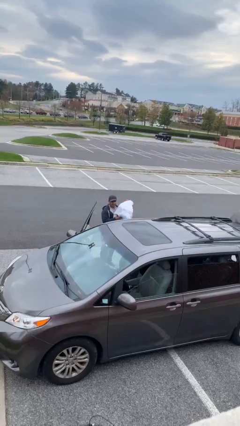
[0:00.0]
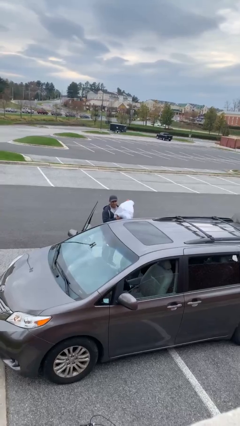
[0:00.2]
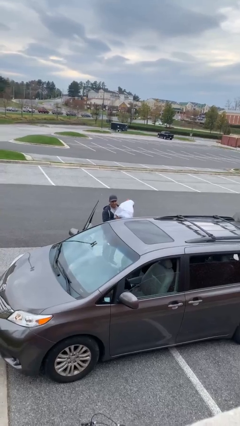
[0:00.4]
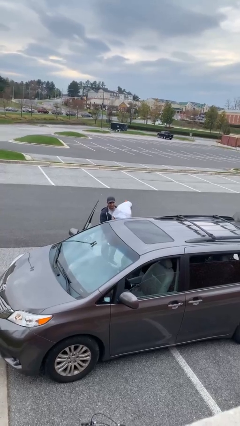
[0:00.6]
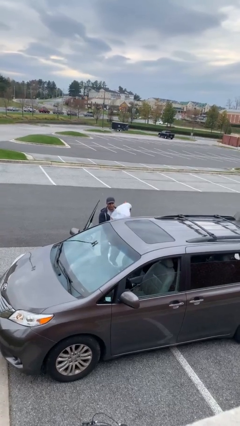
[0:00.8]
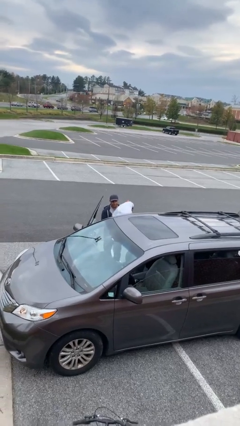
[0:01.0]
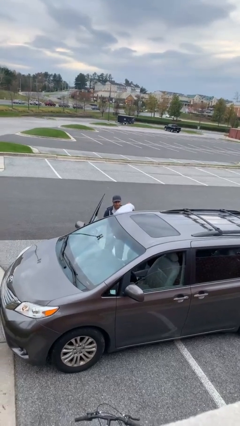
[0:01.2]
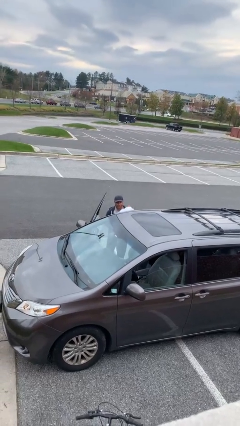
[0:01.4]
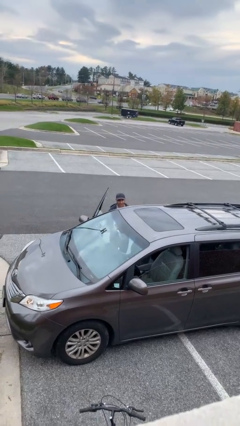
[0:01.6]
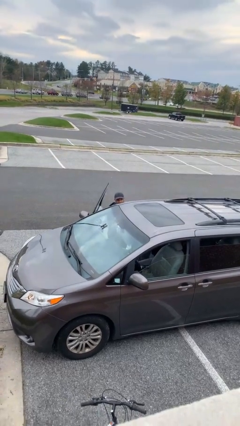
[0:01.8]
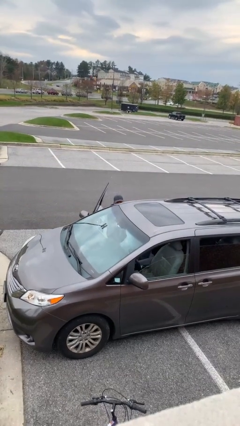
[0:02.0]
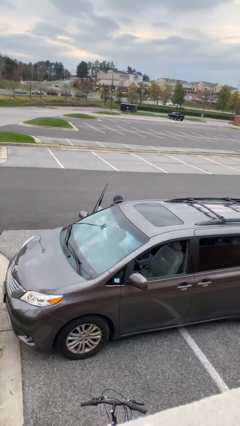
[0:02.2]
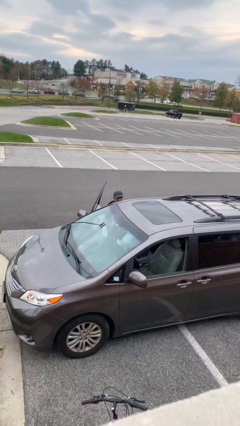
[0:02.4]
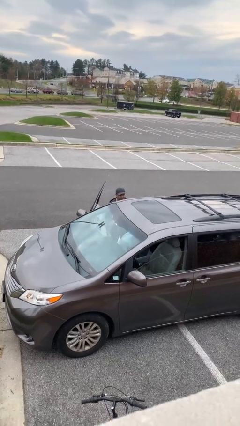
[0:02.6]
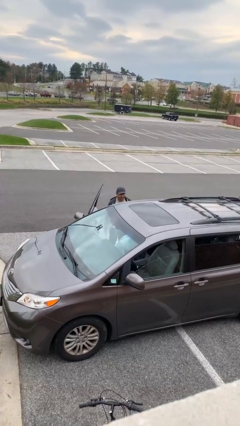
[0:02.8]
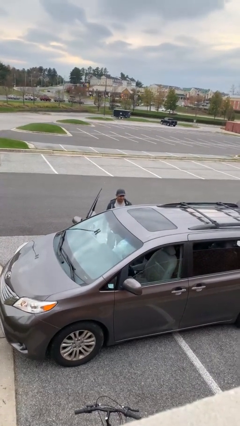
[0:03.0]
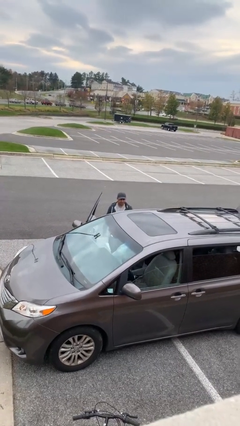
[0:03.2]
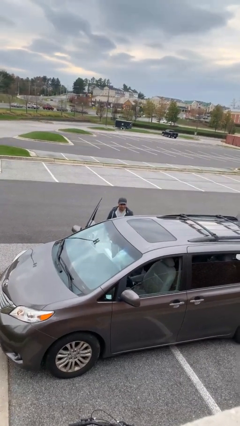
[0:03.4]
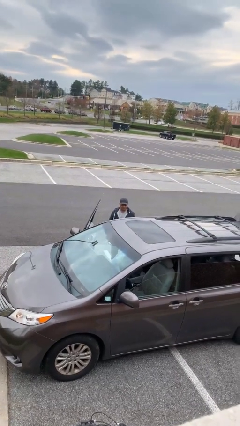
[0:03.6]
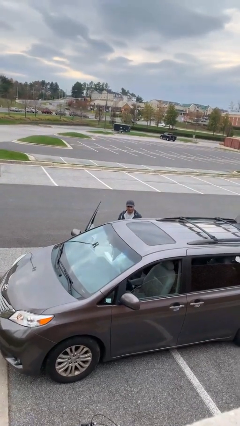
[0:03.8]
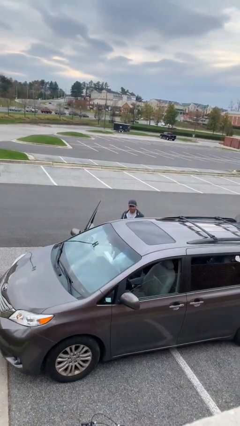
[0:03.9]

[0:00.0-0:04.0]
person loads car

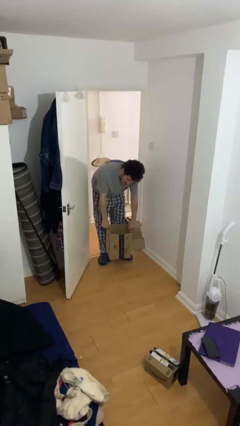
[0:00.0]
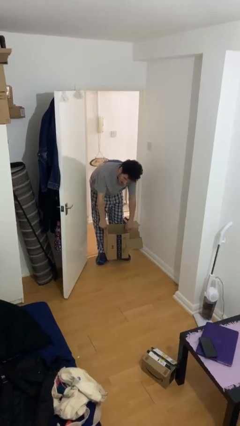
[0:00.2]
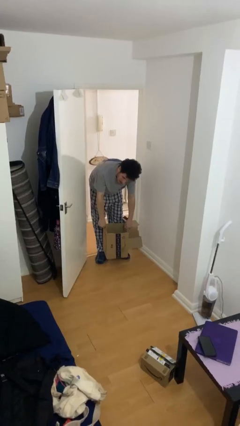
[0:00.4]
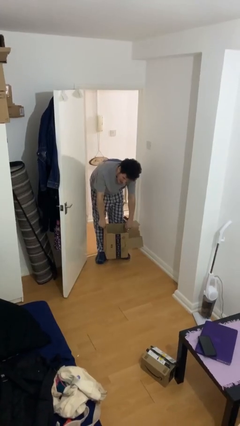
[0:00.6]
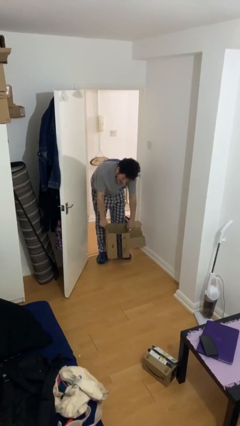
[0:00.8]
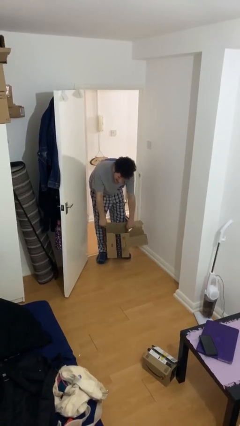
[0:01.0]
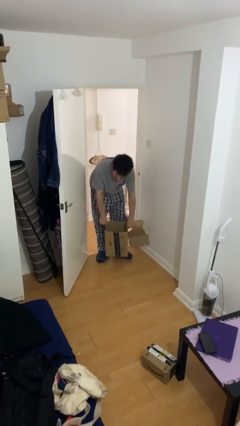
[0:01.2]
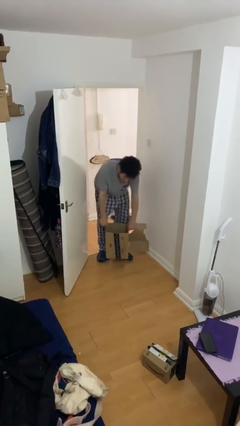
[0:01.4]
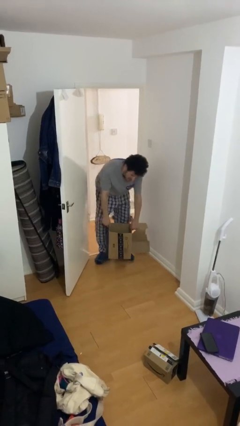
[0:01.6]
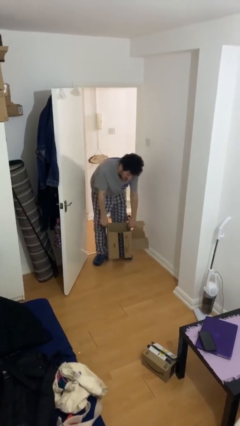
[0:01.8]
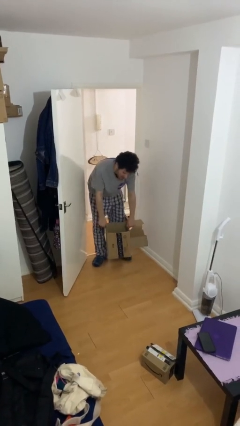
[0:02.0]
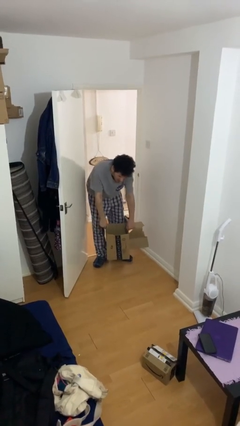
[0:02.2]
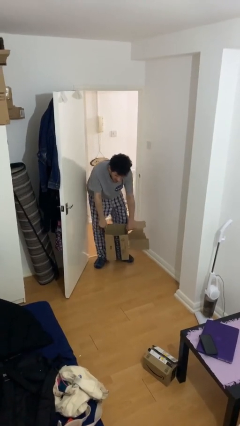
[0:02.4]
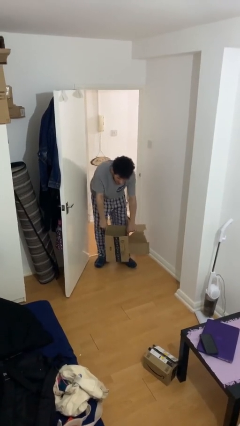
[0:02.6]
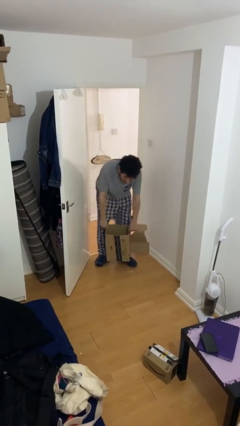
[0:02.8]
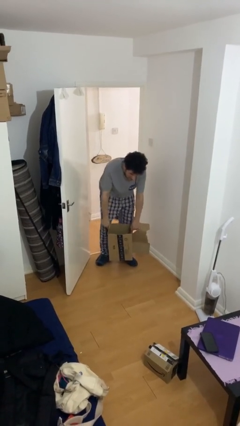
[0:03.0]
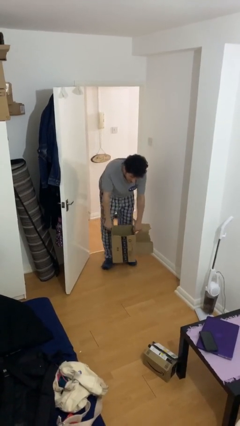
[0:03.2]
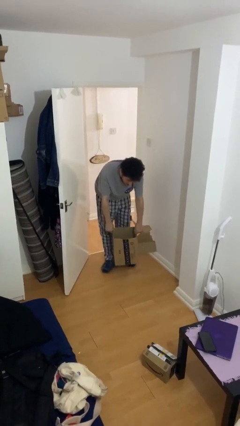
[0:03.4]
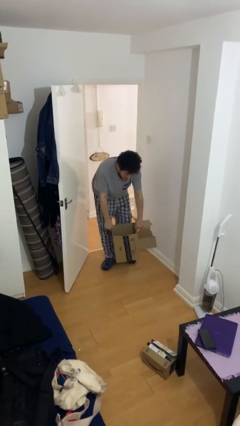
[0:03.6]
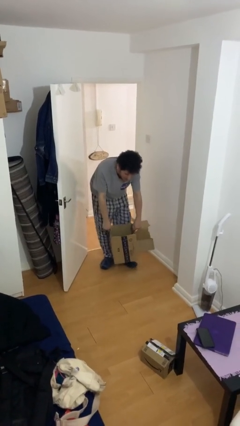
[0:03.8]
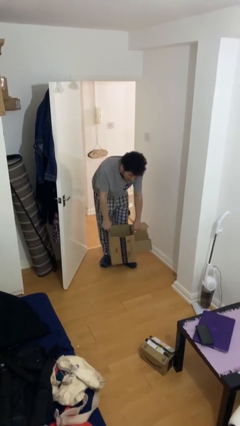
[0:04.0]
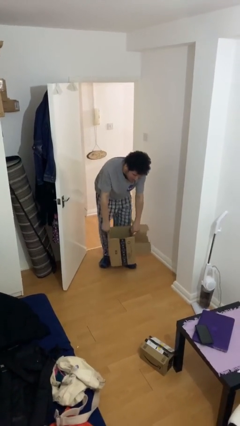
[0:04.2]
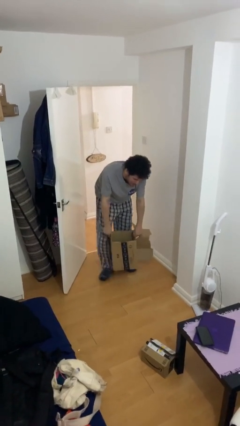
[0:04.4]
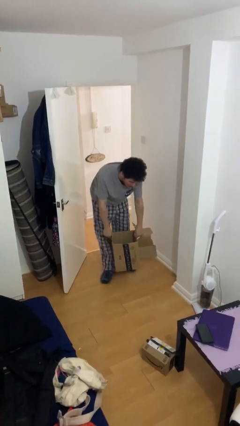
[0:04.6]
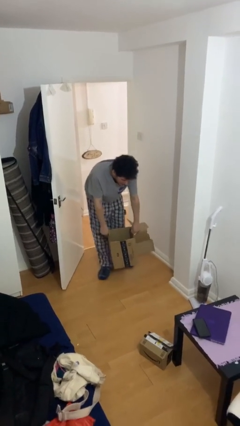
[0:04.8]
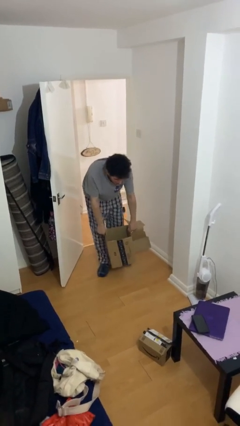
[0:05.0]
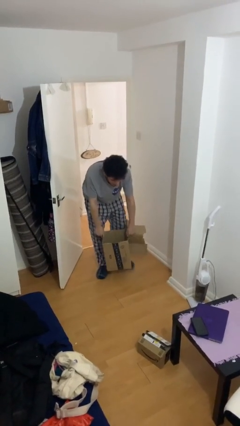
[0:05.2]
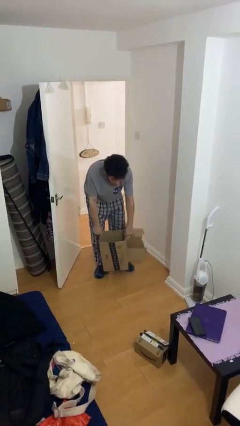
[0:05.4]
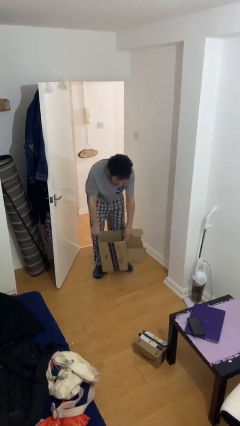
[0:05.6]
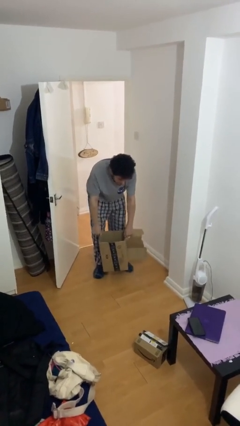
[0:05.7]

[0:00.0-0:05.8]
person carries heavy object

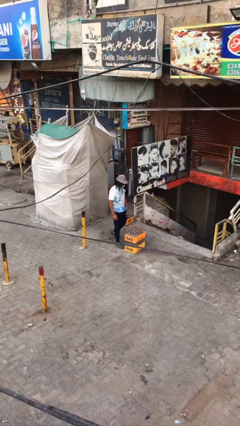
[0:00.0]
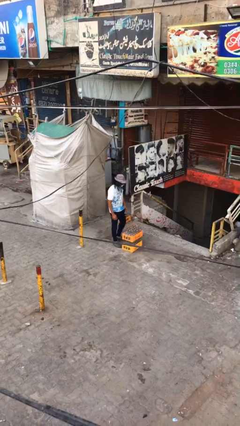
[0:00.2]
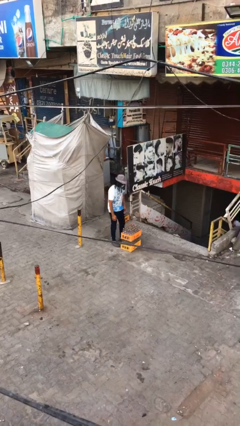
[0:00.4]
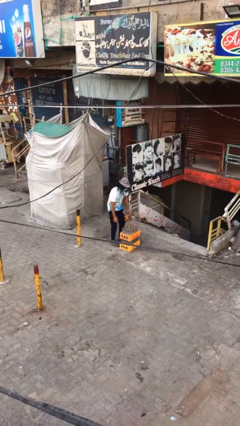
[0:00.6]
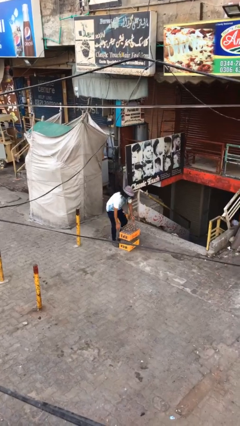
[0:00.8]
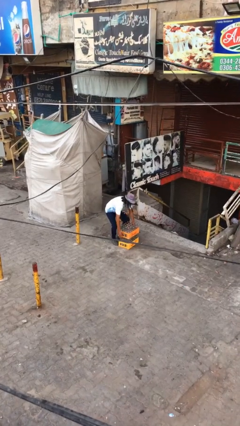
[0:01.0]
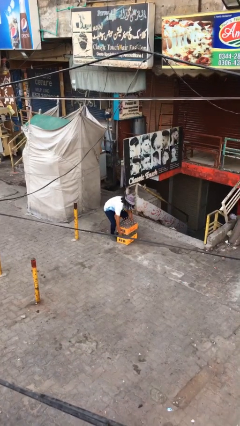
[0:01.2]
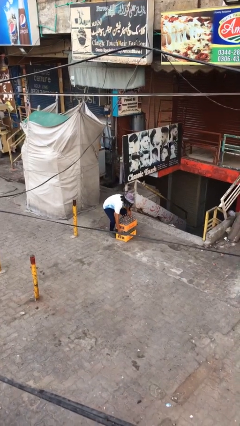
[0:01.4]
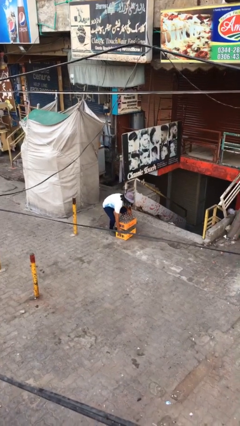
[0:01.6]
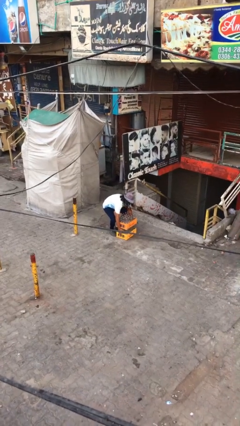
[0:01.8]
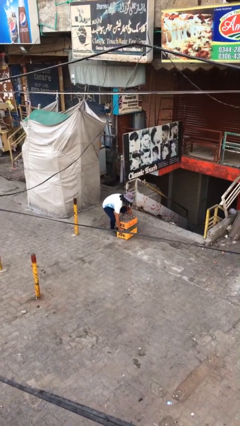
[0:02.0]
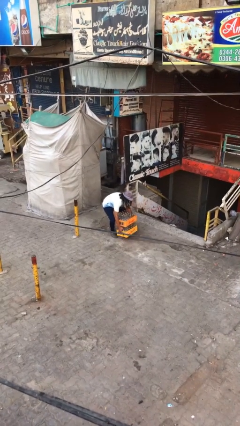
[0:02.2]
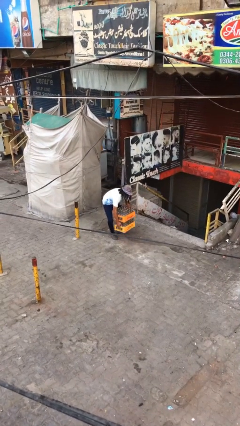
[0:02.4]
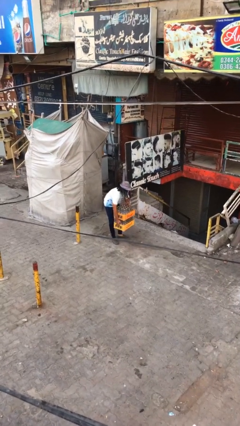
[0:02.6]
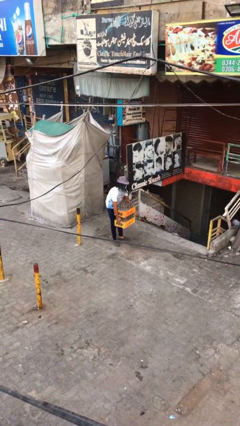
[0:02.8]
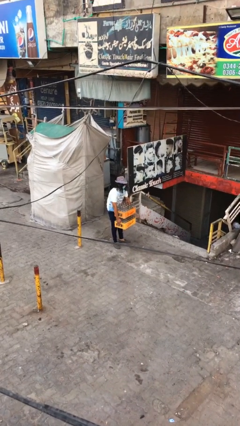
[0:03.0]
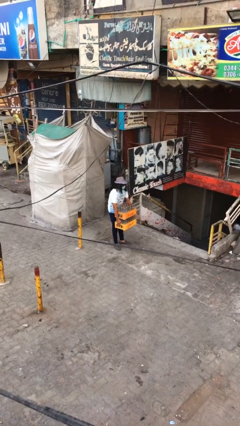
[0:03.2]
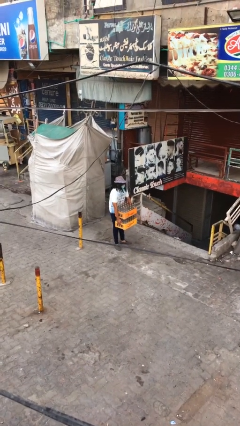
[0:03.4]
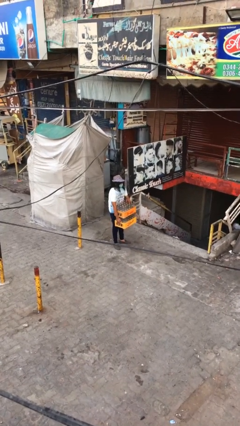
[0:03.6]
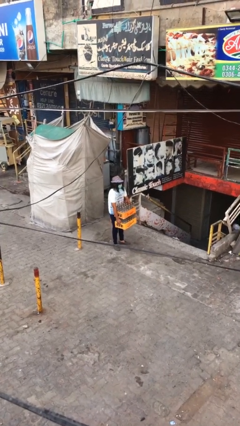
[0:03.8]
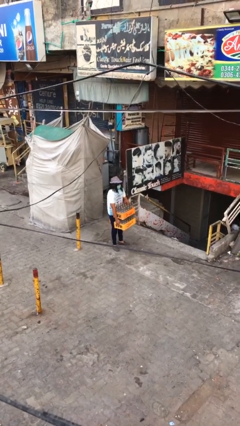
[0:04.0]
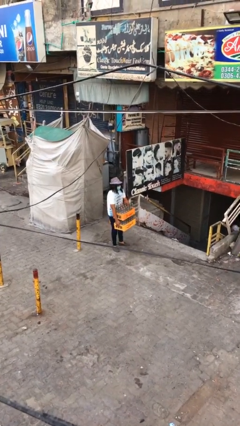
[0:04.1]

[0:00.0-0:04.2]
person picks up object from floor

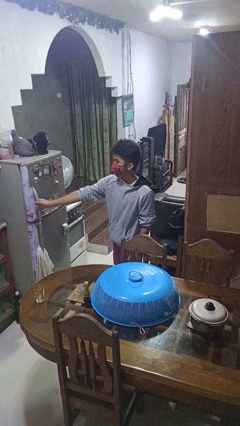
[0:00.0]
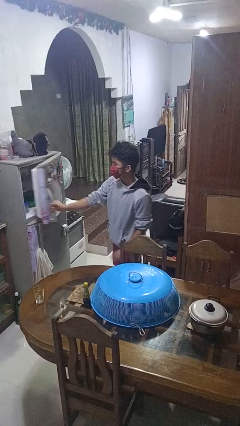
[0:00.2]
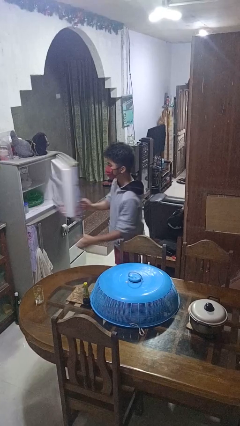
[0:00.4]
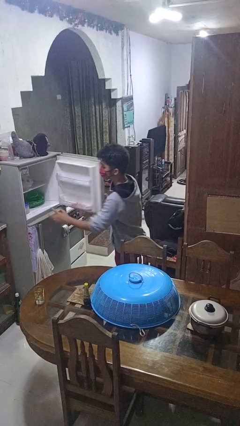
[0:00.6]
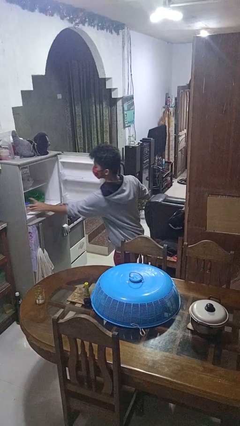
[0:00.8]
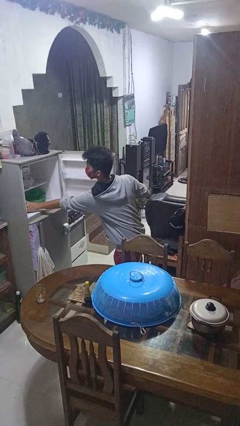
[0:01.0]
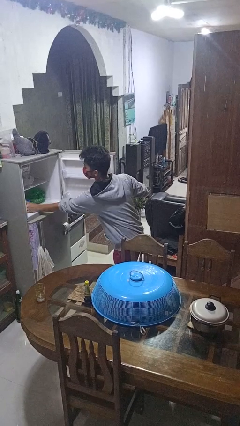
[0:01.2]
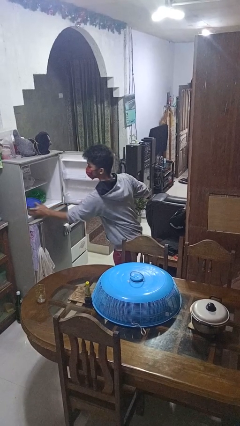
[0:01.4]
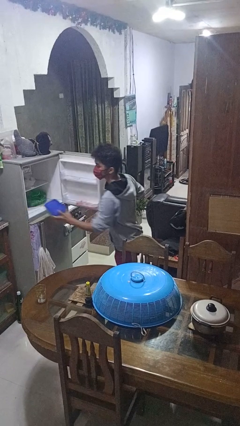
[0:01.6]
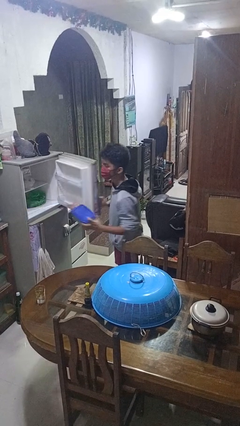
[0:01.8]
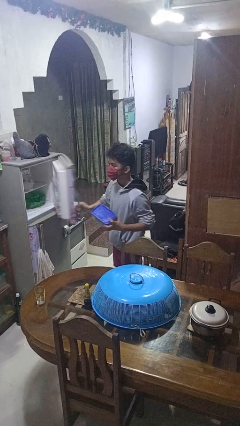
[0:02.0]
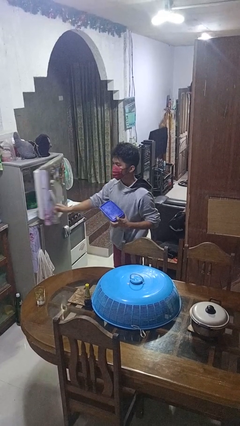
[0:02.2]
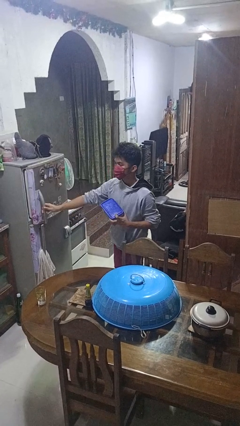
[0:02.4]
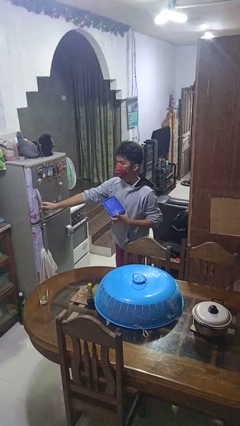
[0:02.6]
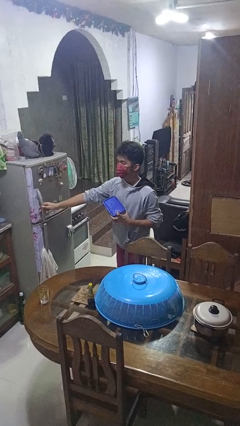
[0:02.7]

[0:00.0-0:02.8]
person takes object from refrigerator

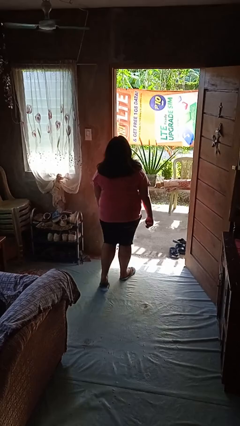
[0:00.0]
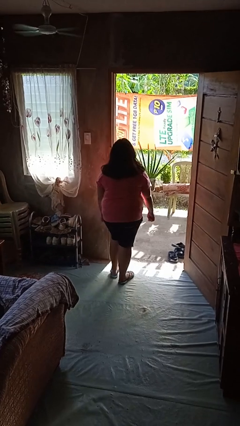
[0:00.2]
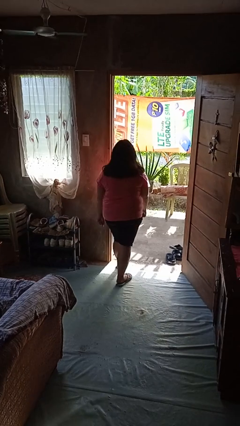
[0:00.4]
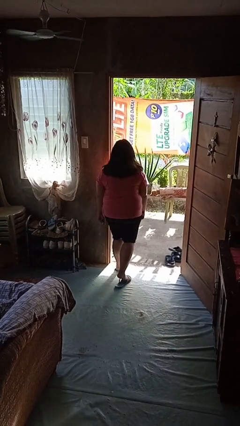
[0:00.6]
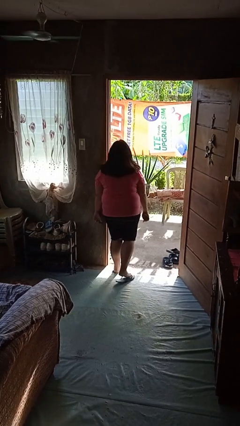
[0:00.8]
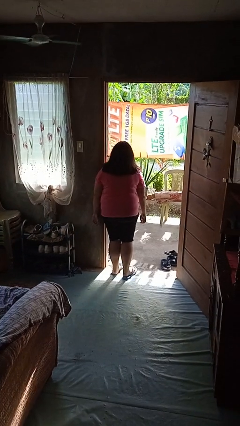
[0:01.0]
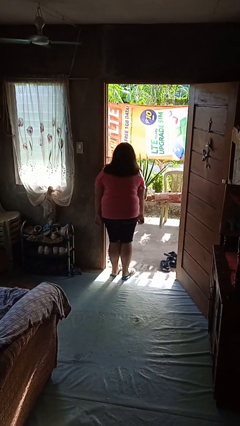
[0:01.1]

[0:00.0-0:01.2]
person bumps into wall
